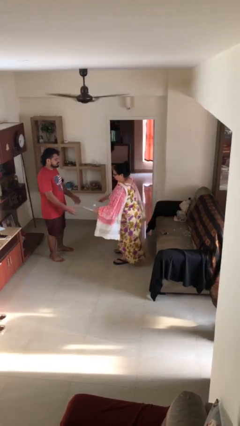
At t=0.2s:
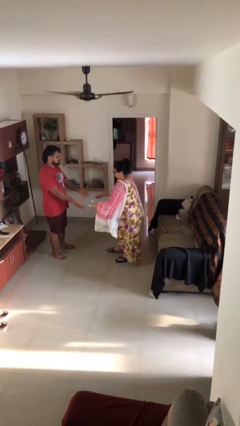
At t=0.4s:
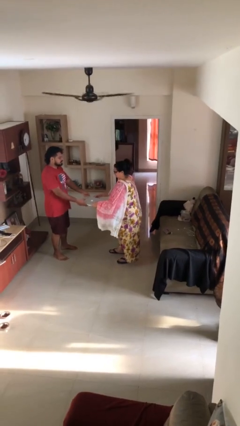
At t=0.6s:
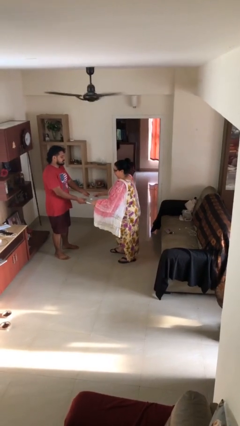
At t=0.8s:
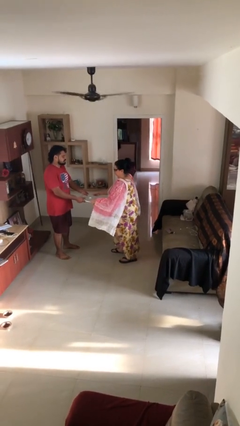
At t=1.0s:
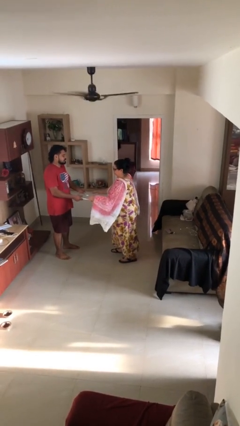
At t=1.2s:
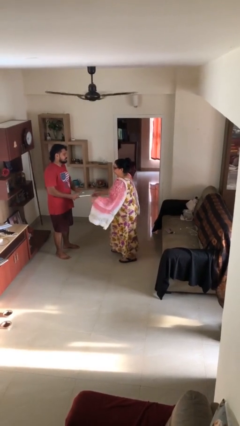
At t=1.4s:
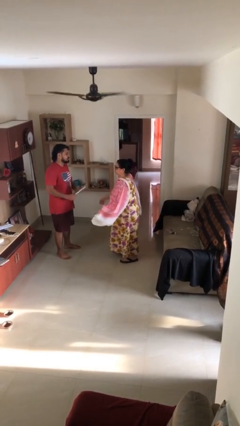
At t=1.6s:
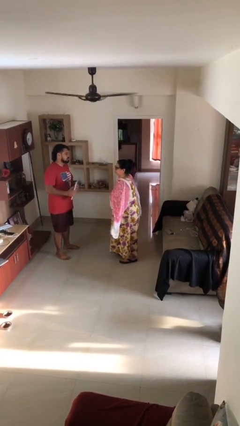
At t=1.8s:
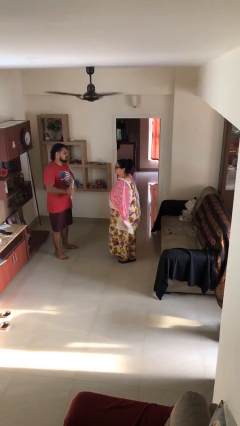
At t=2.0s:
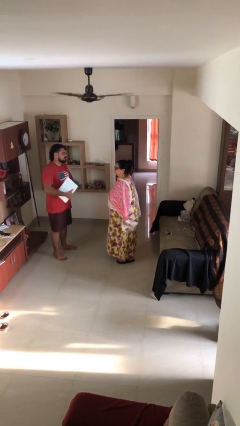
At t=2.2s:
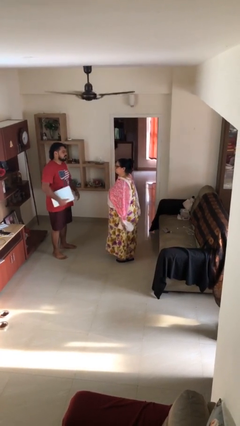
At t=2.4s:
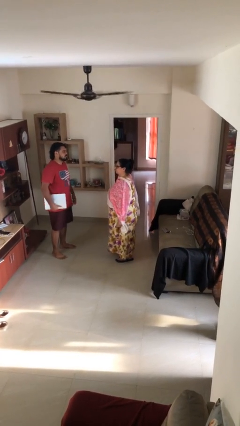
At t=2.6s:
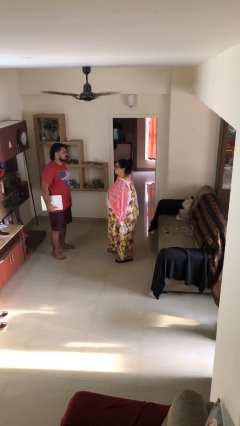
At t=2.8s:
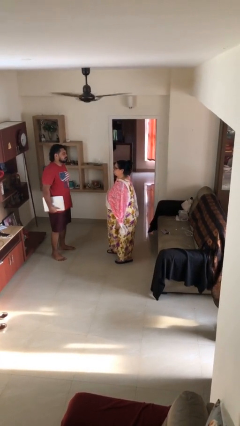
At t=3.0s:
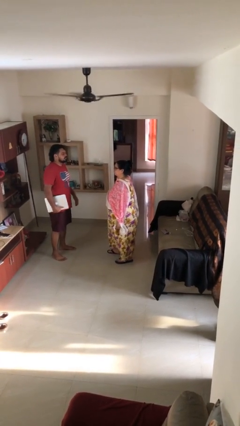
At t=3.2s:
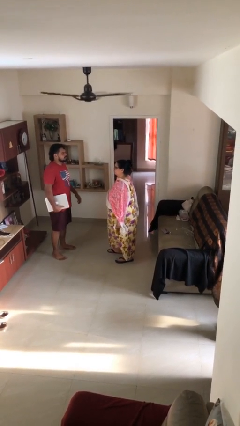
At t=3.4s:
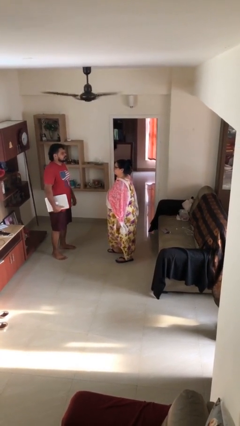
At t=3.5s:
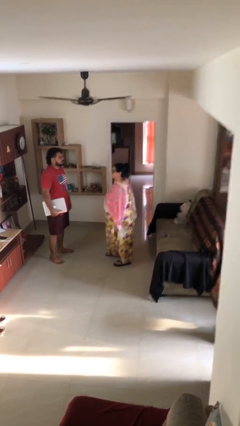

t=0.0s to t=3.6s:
person transfers object to person

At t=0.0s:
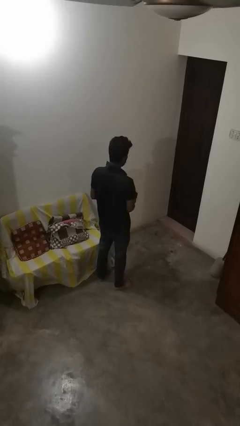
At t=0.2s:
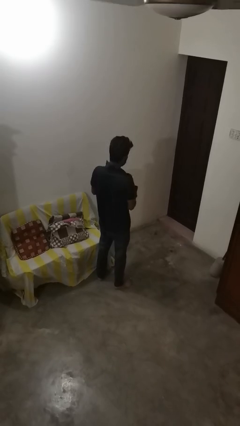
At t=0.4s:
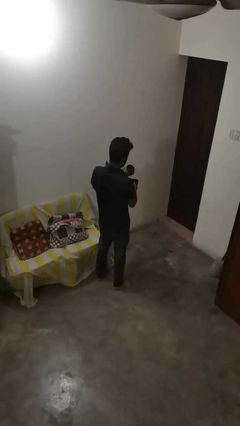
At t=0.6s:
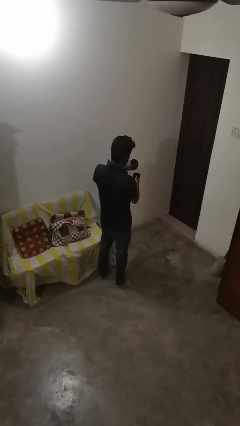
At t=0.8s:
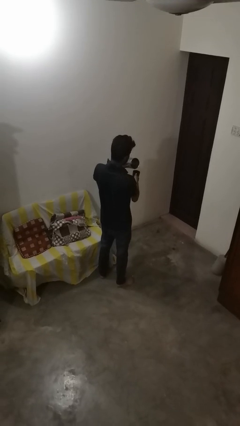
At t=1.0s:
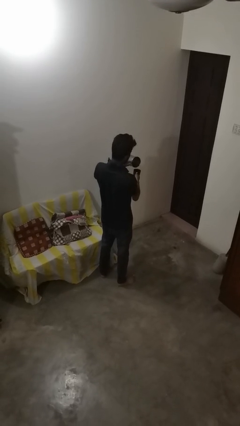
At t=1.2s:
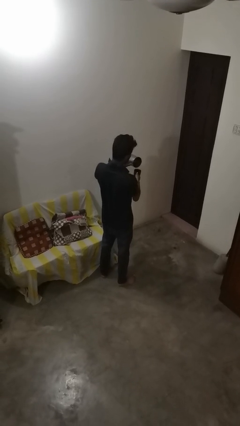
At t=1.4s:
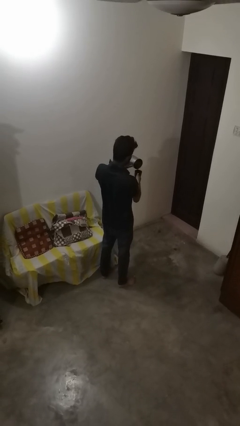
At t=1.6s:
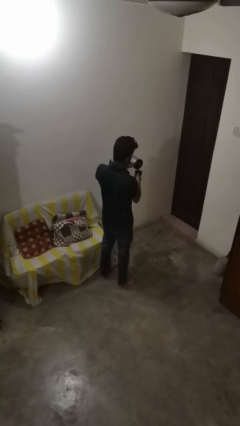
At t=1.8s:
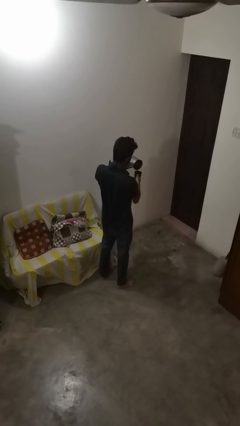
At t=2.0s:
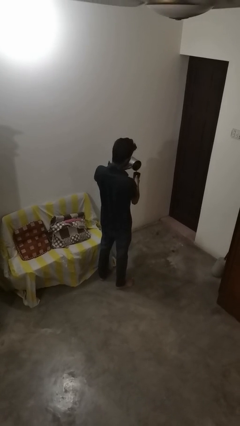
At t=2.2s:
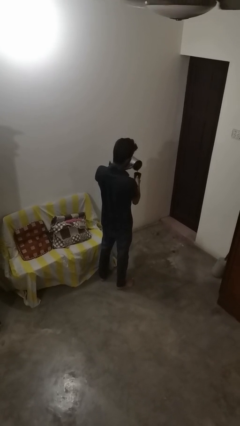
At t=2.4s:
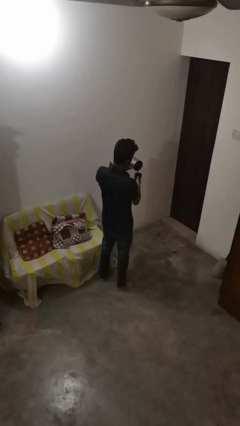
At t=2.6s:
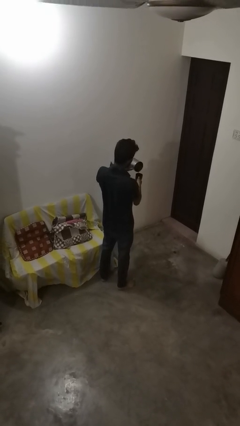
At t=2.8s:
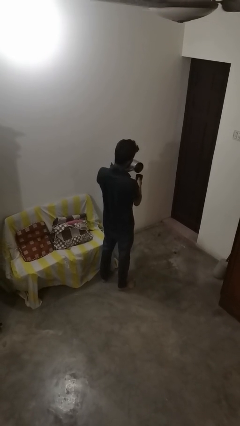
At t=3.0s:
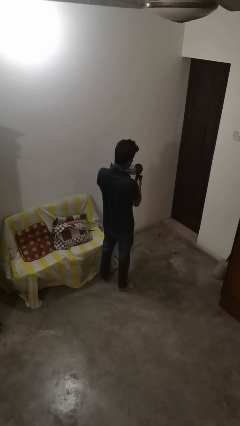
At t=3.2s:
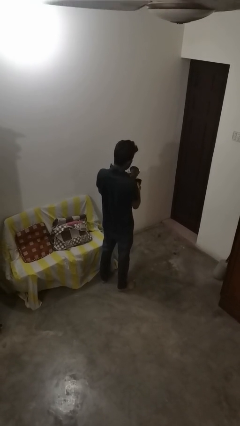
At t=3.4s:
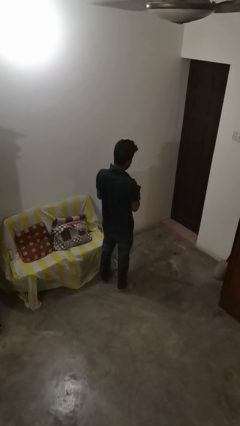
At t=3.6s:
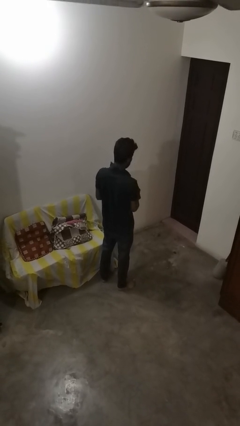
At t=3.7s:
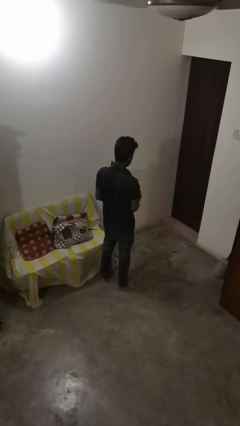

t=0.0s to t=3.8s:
person pours coffee into mug

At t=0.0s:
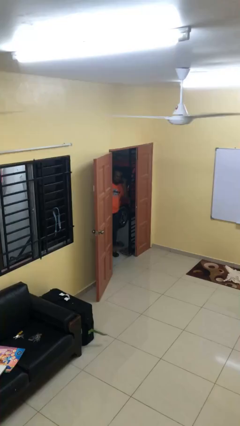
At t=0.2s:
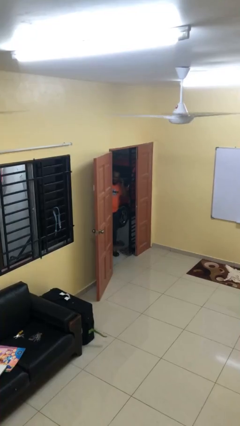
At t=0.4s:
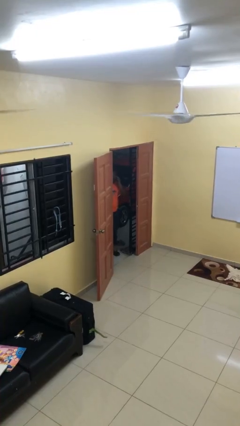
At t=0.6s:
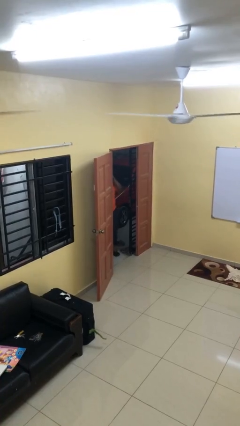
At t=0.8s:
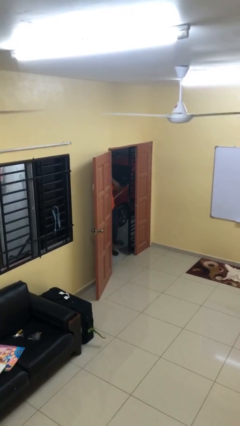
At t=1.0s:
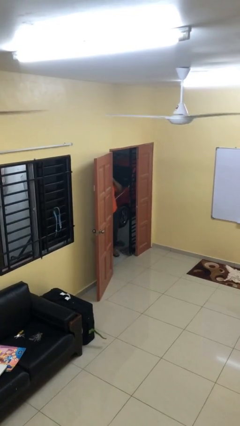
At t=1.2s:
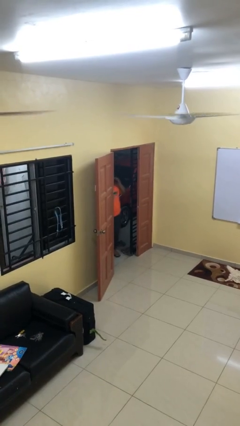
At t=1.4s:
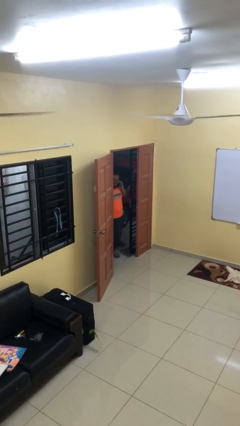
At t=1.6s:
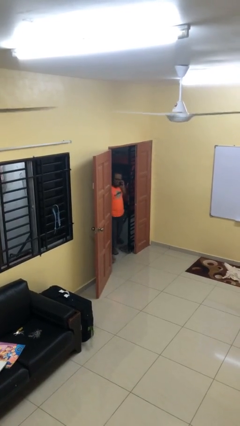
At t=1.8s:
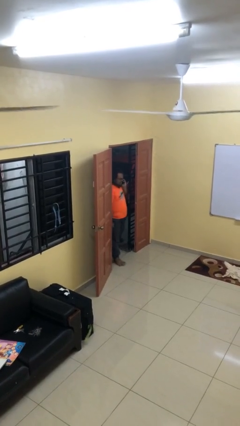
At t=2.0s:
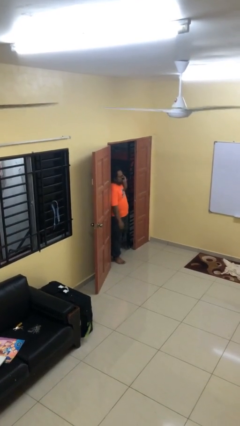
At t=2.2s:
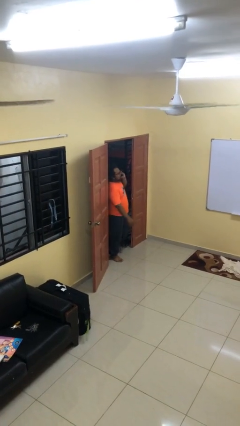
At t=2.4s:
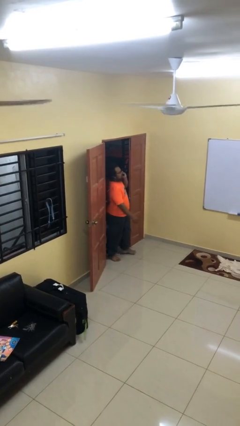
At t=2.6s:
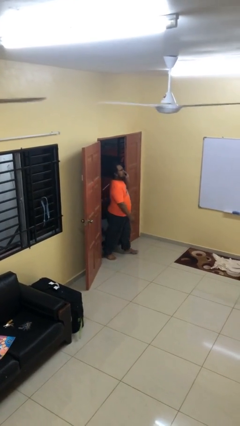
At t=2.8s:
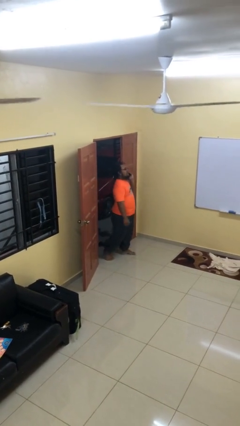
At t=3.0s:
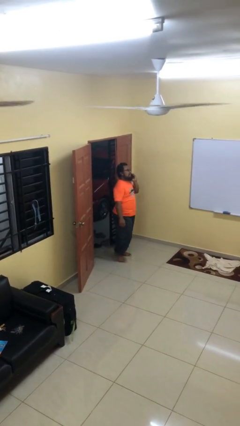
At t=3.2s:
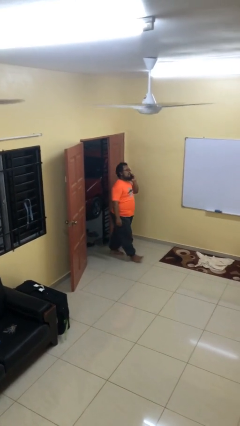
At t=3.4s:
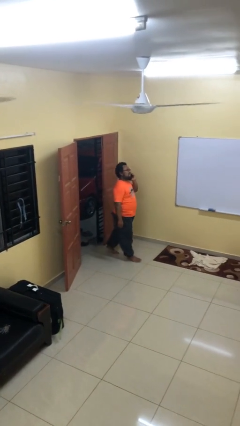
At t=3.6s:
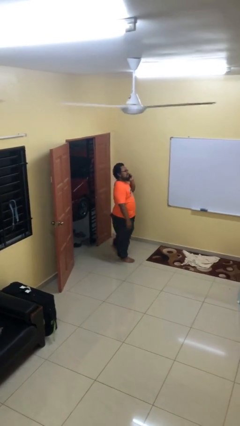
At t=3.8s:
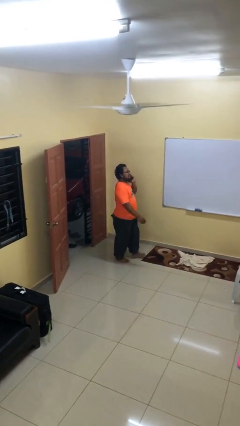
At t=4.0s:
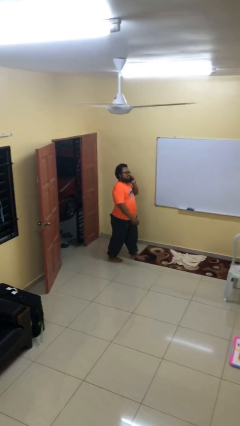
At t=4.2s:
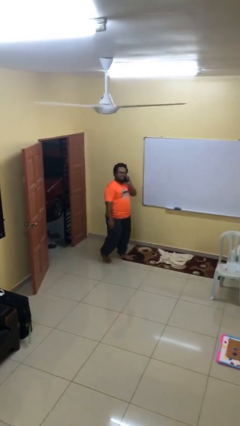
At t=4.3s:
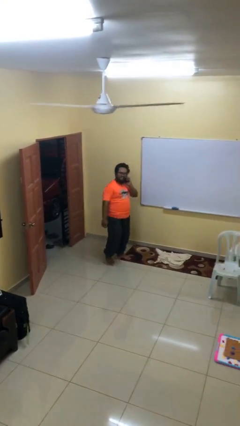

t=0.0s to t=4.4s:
person enters scene through structure

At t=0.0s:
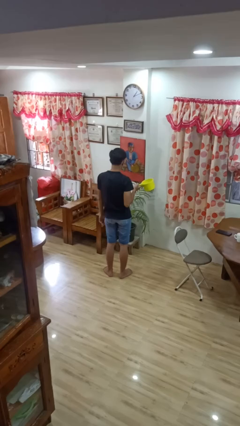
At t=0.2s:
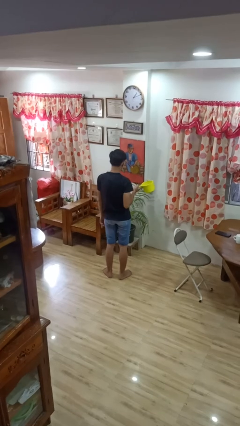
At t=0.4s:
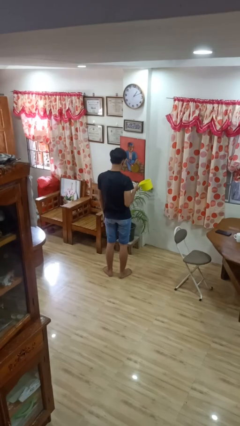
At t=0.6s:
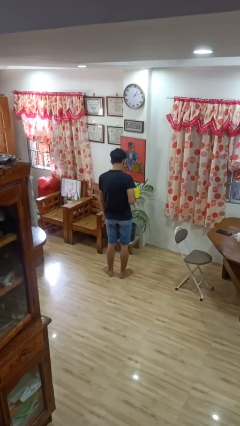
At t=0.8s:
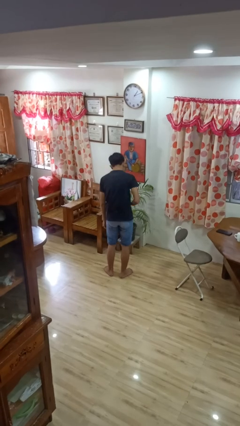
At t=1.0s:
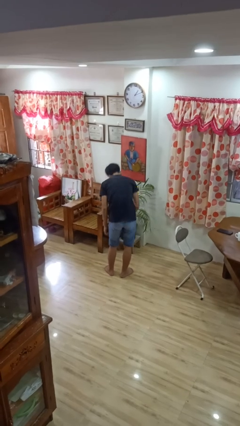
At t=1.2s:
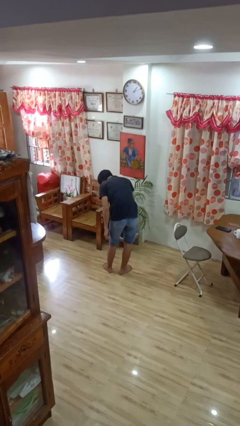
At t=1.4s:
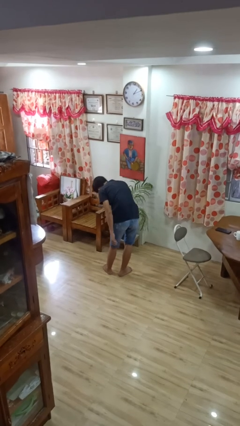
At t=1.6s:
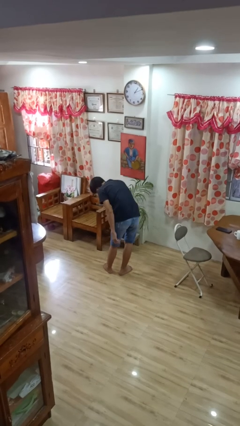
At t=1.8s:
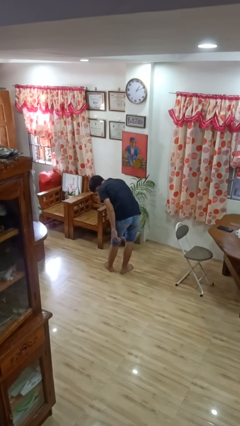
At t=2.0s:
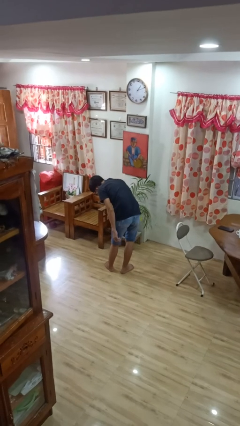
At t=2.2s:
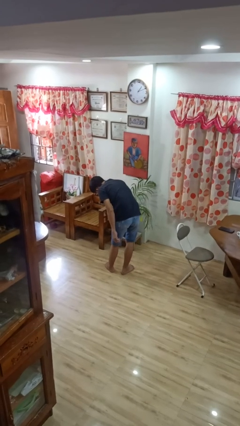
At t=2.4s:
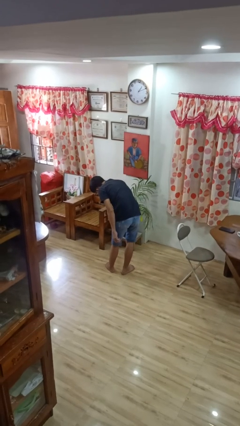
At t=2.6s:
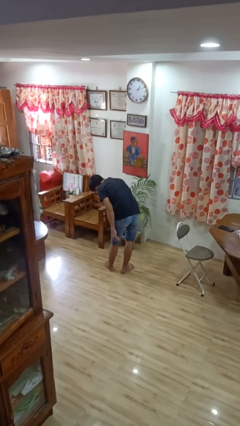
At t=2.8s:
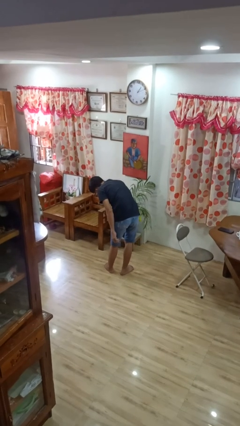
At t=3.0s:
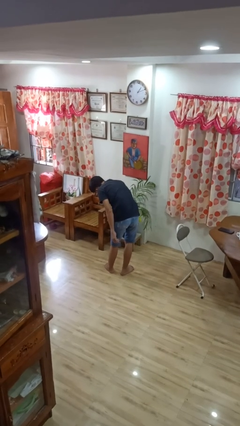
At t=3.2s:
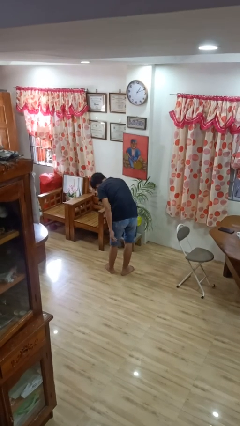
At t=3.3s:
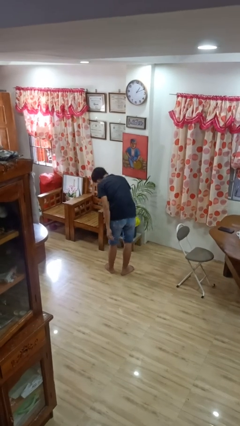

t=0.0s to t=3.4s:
person waters houseplant

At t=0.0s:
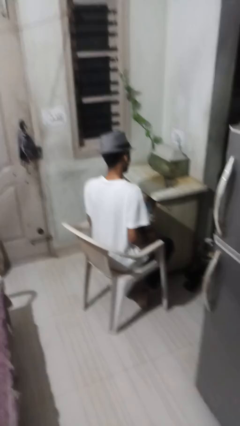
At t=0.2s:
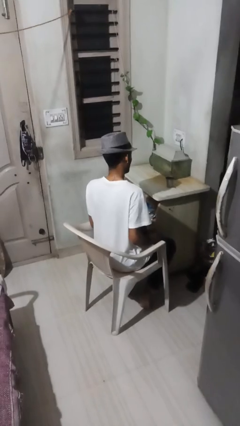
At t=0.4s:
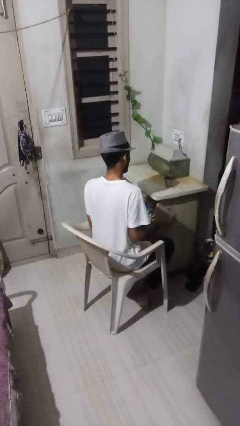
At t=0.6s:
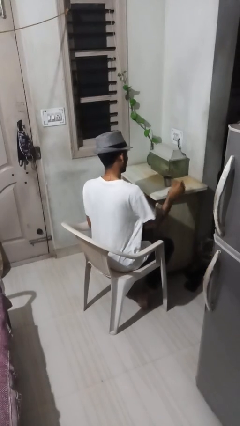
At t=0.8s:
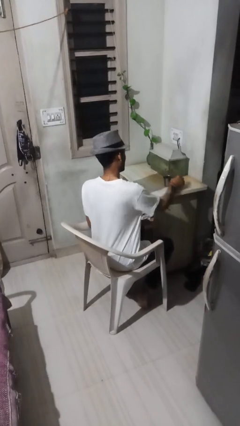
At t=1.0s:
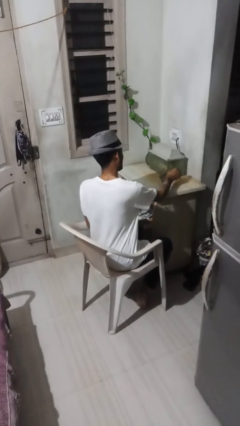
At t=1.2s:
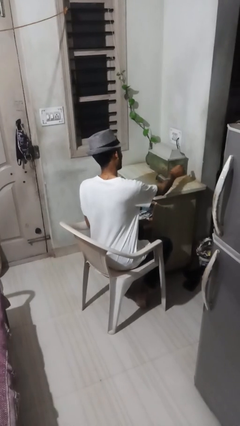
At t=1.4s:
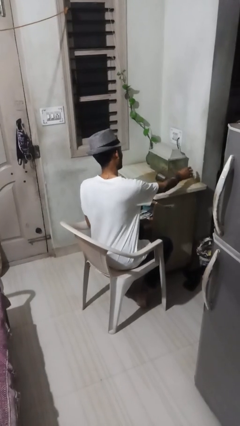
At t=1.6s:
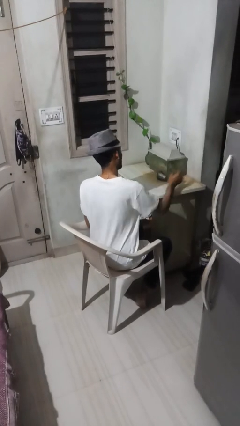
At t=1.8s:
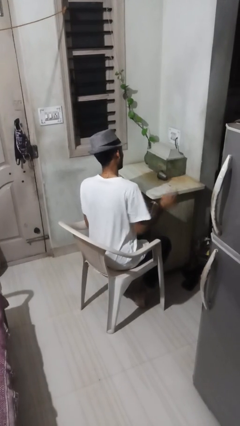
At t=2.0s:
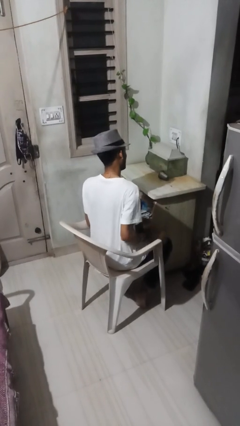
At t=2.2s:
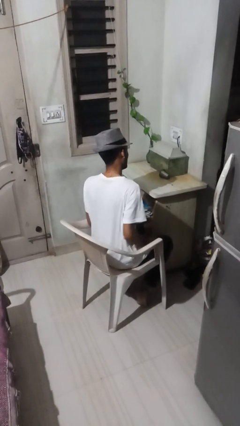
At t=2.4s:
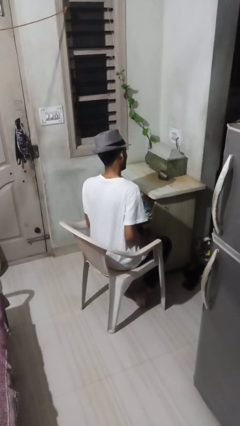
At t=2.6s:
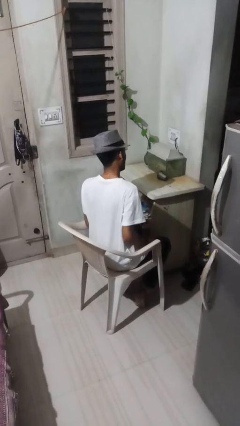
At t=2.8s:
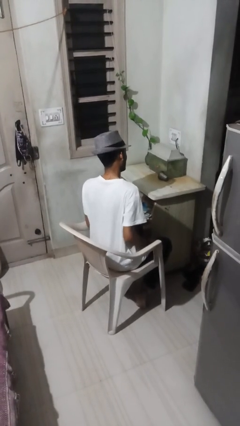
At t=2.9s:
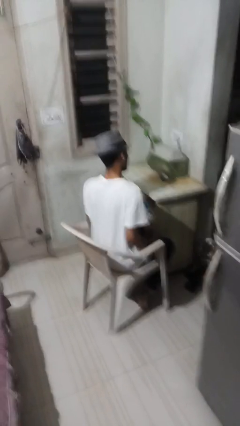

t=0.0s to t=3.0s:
person knocks over glass
